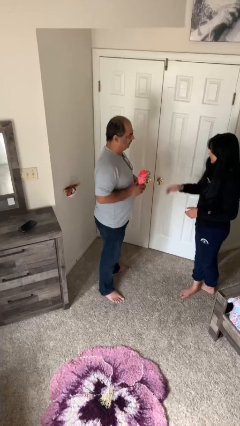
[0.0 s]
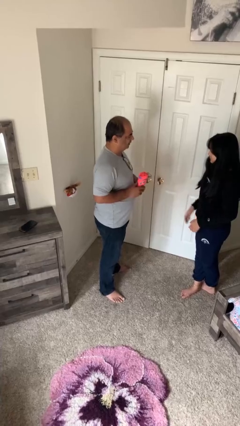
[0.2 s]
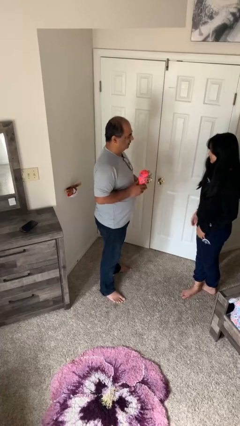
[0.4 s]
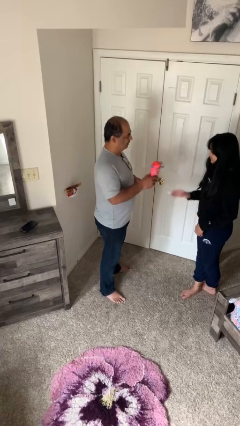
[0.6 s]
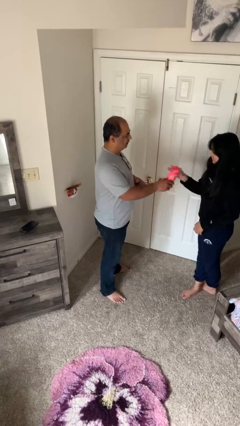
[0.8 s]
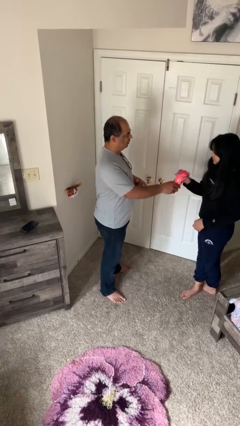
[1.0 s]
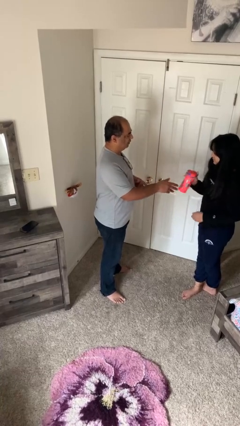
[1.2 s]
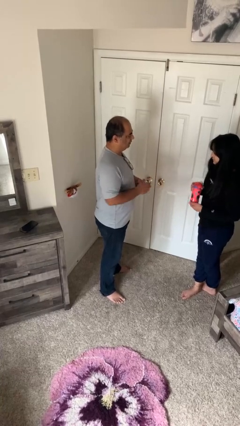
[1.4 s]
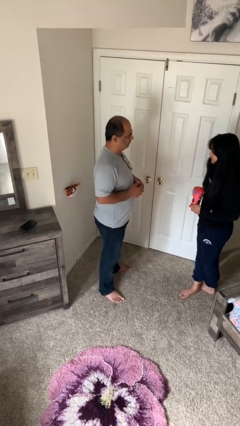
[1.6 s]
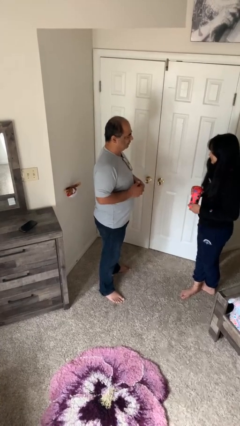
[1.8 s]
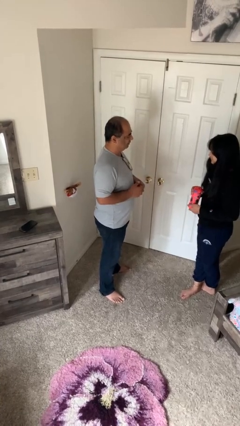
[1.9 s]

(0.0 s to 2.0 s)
person transfers object to person

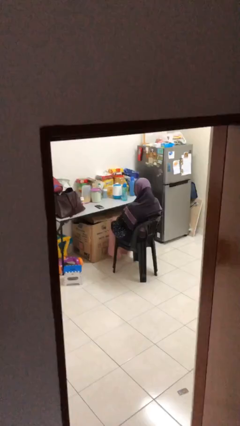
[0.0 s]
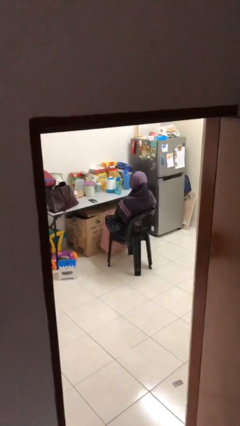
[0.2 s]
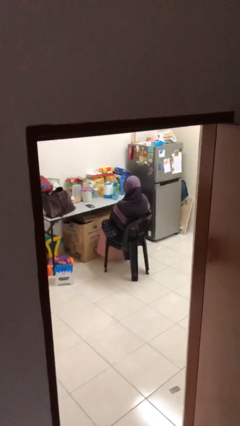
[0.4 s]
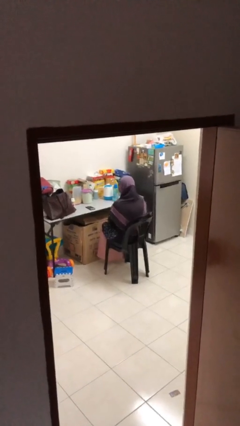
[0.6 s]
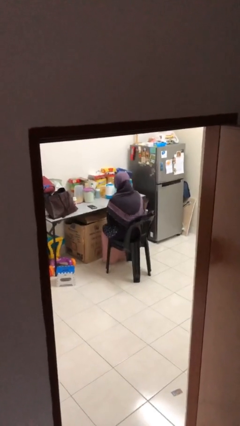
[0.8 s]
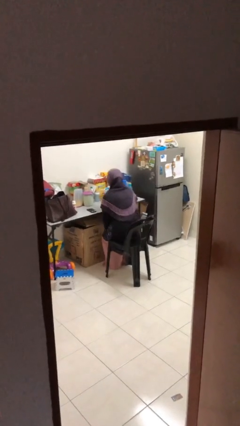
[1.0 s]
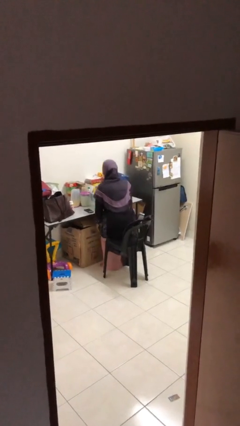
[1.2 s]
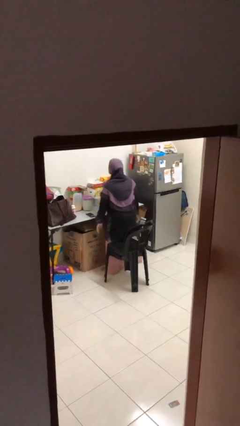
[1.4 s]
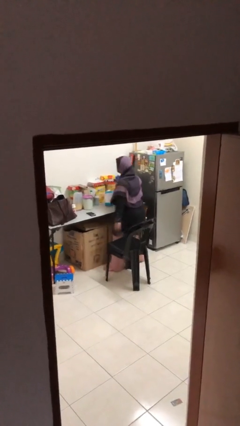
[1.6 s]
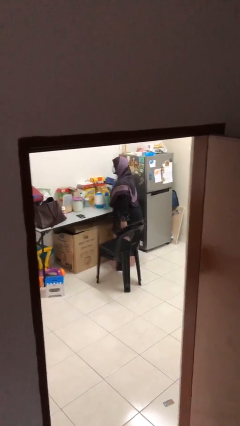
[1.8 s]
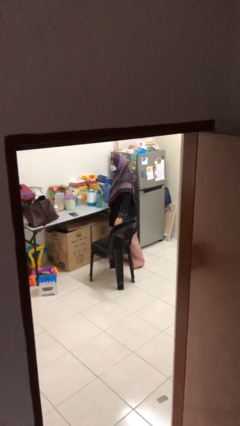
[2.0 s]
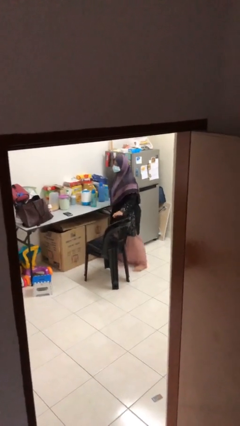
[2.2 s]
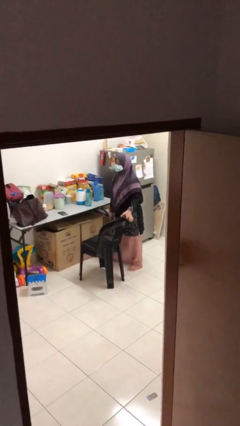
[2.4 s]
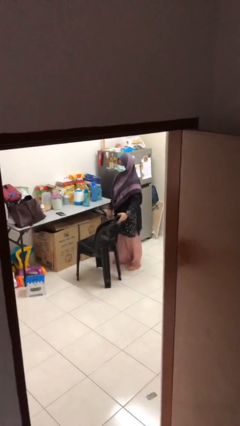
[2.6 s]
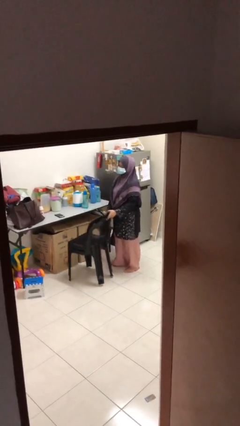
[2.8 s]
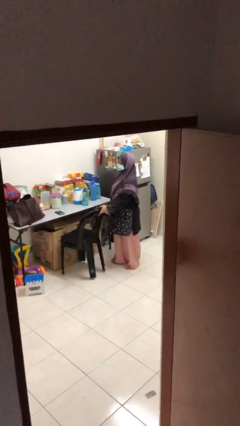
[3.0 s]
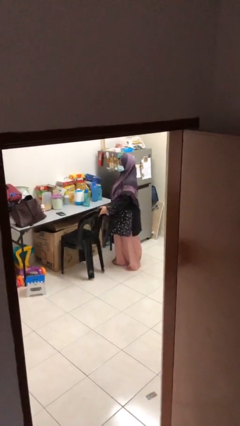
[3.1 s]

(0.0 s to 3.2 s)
person stands up

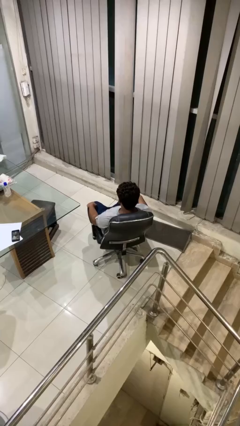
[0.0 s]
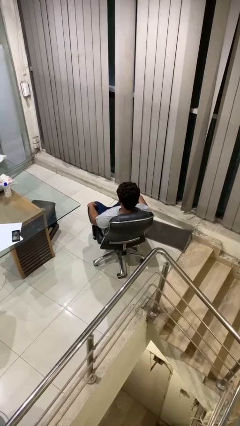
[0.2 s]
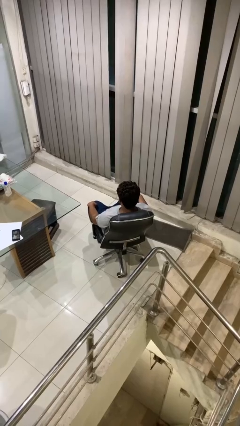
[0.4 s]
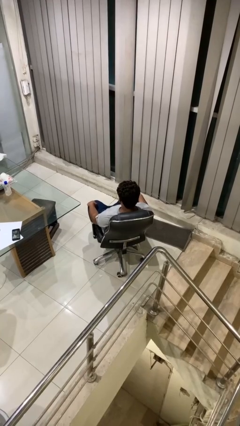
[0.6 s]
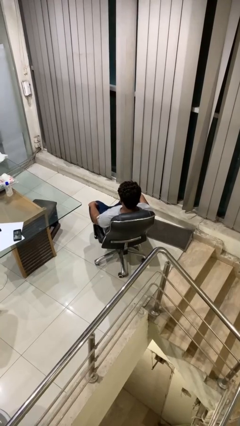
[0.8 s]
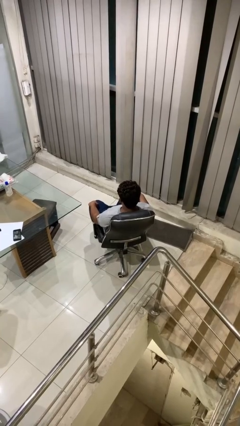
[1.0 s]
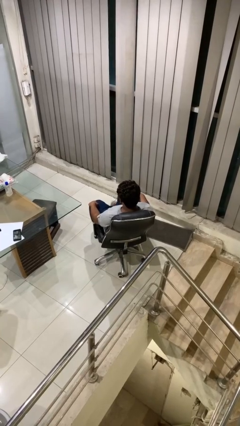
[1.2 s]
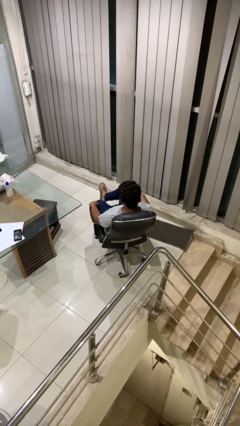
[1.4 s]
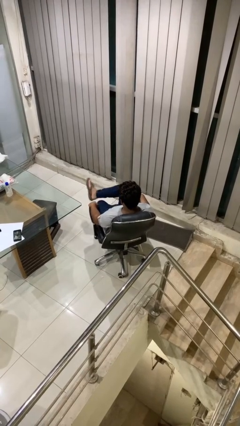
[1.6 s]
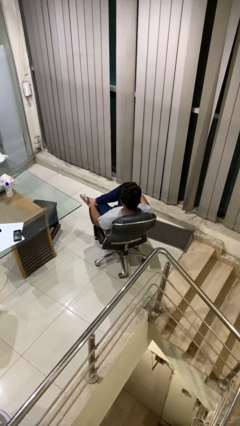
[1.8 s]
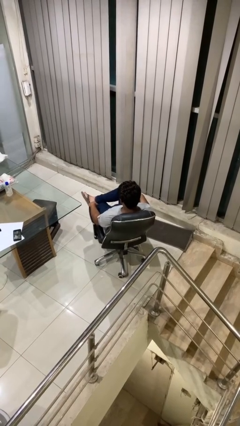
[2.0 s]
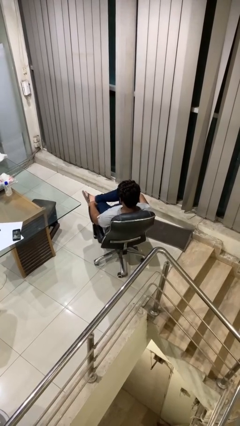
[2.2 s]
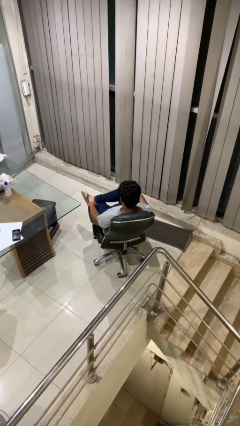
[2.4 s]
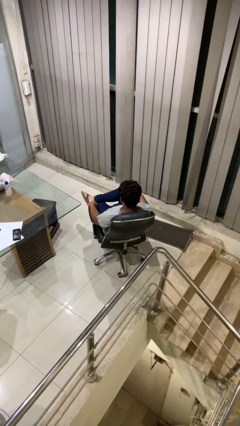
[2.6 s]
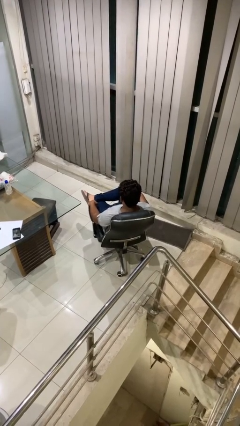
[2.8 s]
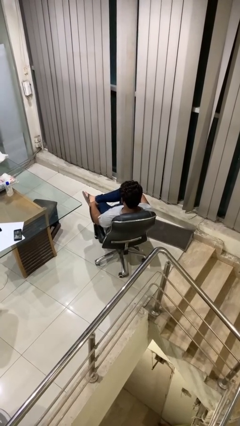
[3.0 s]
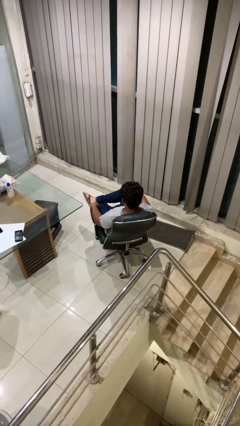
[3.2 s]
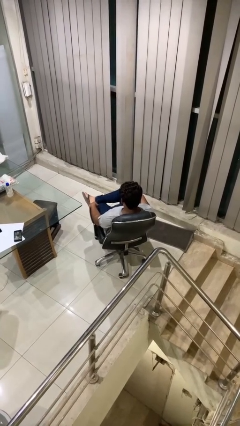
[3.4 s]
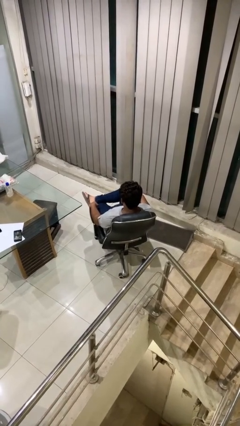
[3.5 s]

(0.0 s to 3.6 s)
person crosses legs

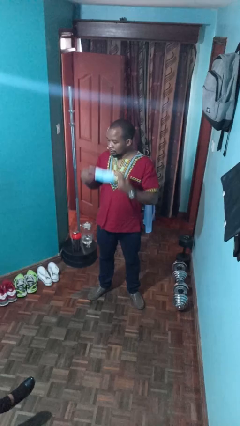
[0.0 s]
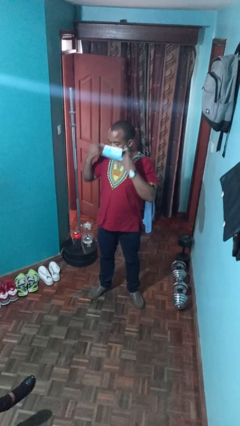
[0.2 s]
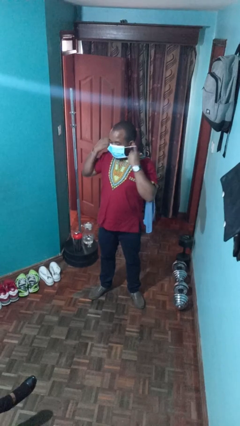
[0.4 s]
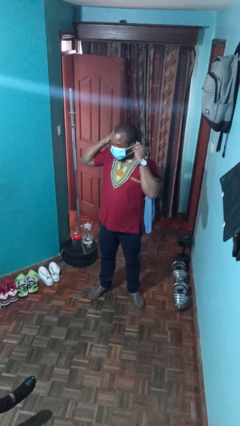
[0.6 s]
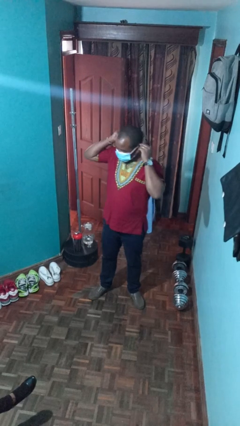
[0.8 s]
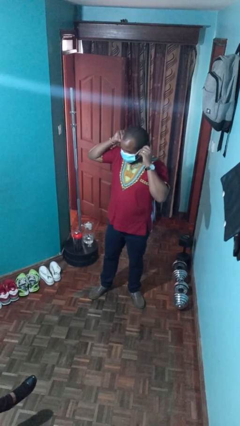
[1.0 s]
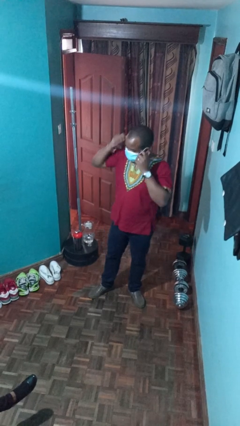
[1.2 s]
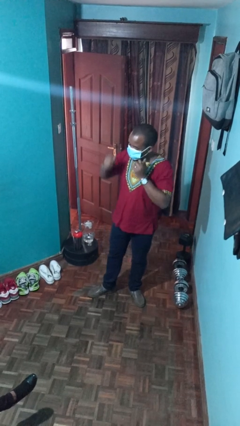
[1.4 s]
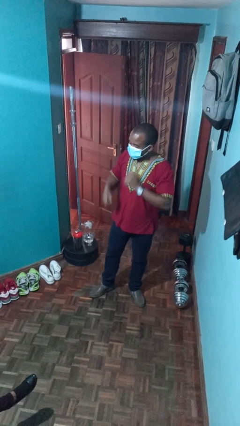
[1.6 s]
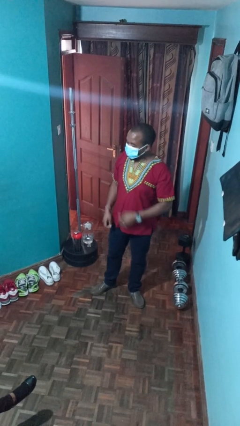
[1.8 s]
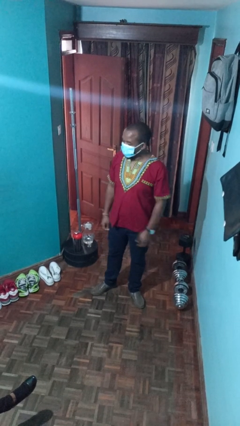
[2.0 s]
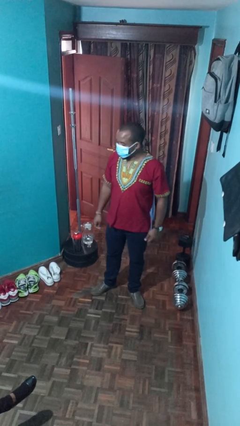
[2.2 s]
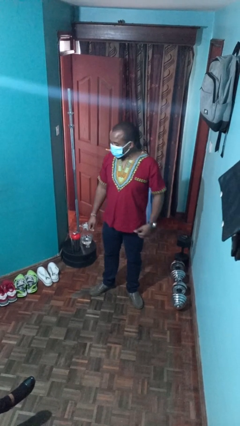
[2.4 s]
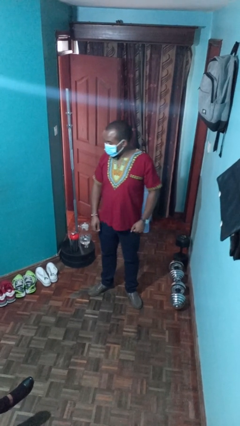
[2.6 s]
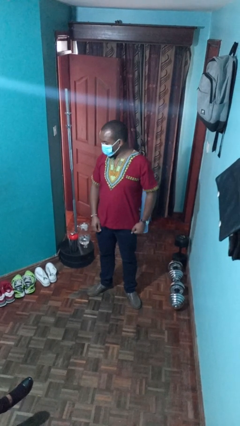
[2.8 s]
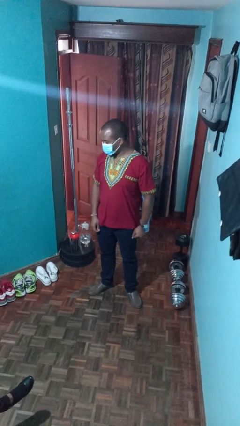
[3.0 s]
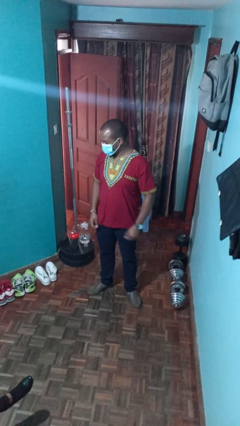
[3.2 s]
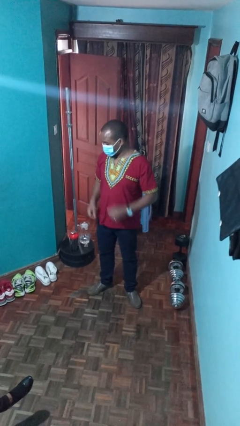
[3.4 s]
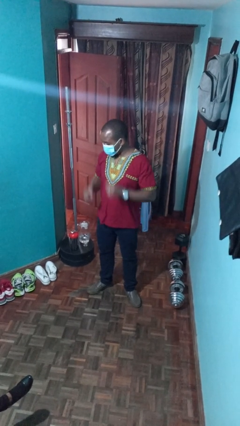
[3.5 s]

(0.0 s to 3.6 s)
person puts on facemask

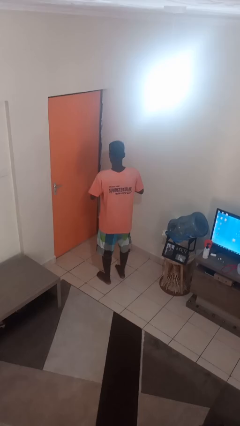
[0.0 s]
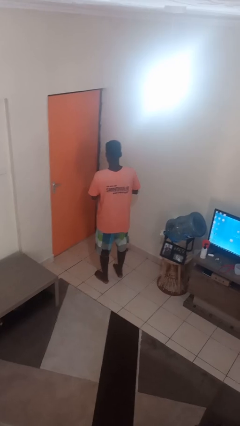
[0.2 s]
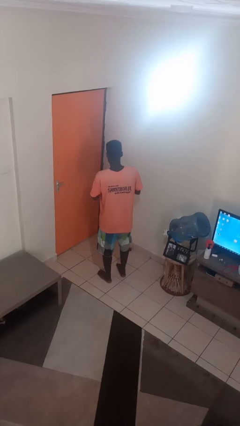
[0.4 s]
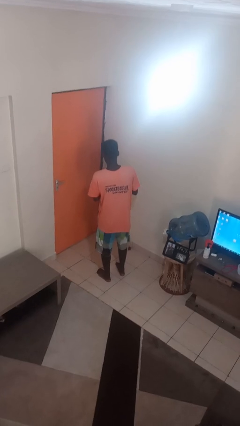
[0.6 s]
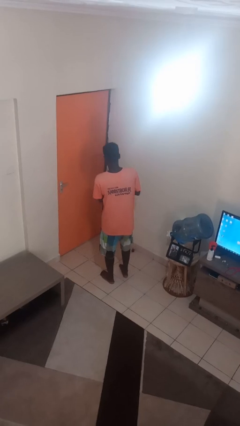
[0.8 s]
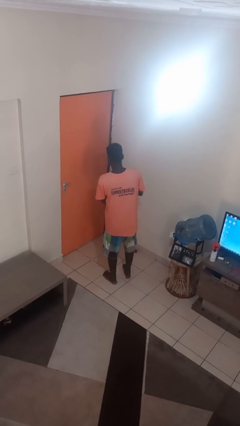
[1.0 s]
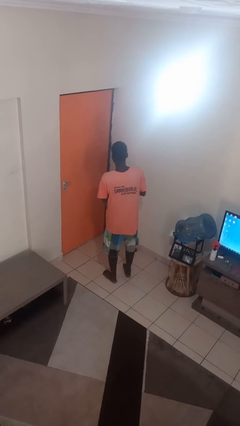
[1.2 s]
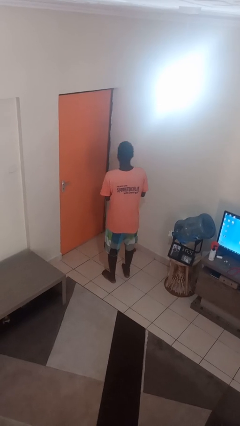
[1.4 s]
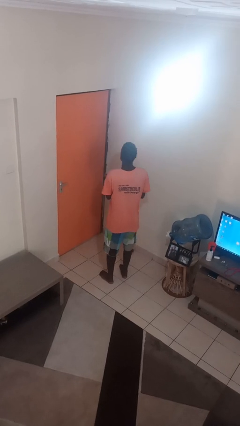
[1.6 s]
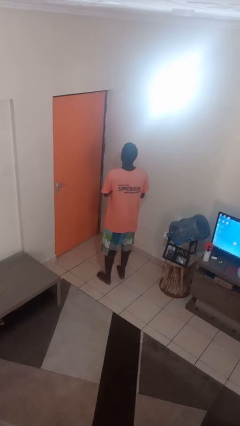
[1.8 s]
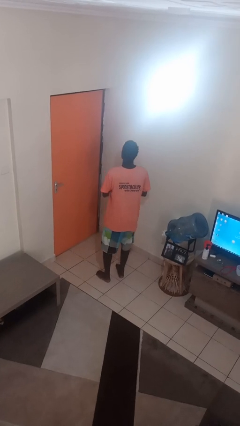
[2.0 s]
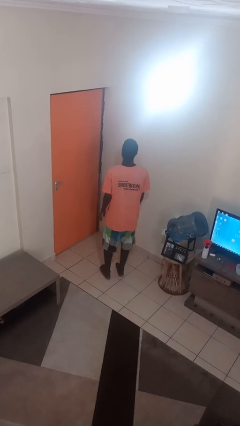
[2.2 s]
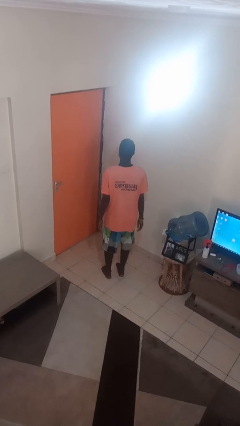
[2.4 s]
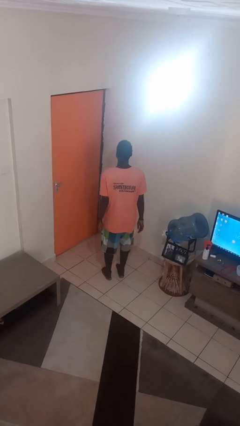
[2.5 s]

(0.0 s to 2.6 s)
person claps hands

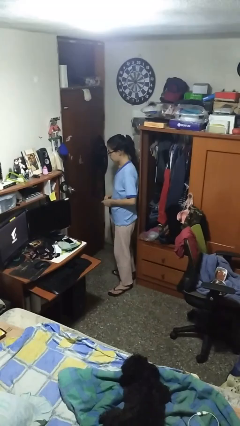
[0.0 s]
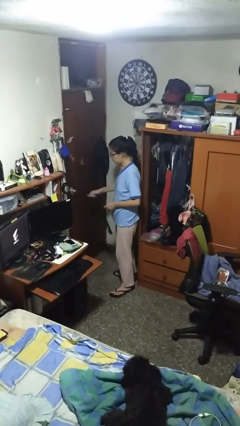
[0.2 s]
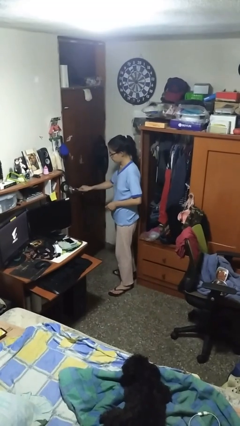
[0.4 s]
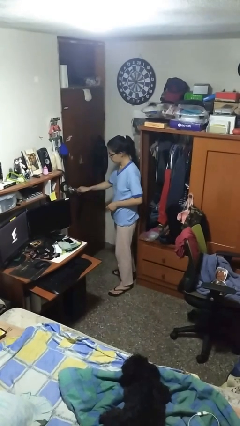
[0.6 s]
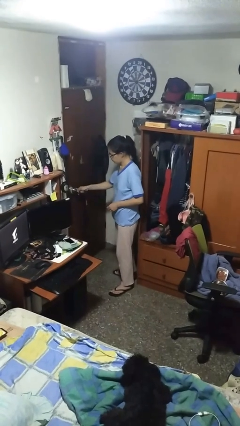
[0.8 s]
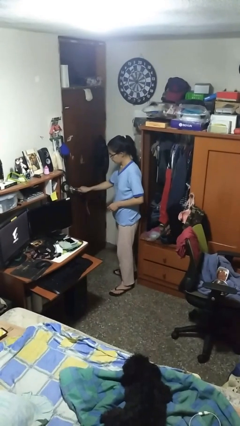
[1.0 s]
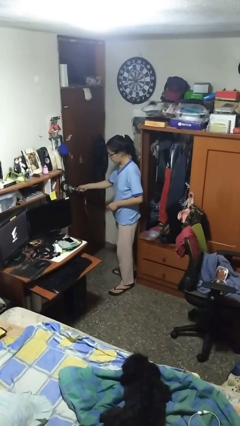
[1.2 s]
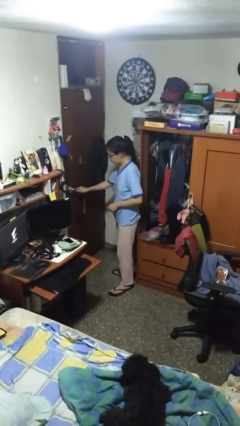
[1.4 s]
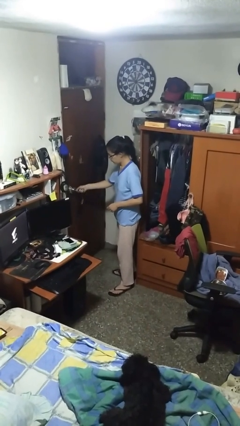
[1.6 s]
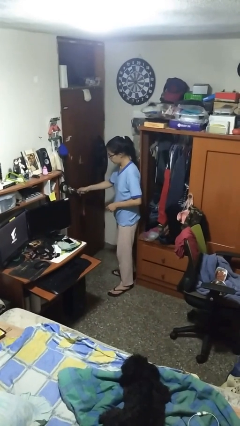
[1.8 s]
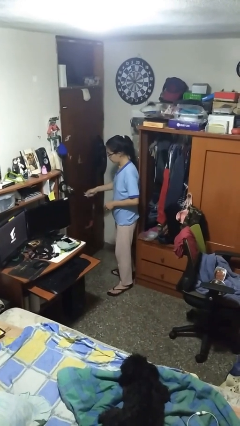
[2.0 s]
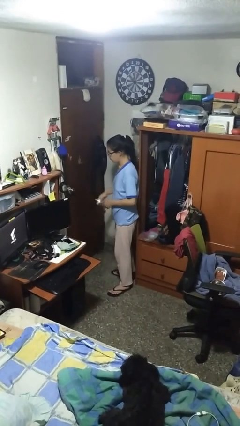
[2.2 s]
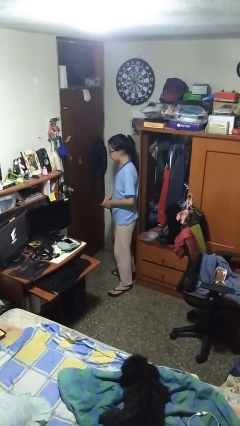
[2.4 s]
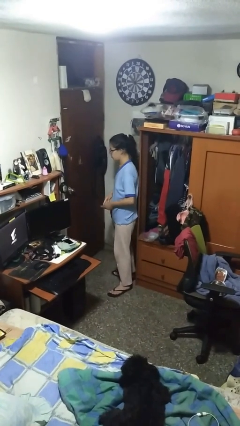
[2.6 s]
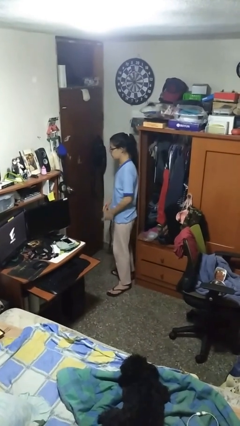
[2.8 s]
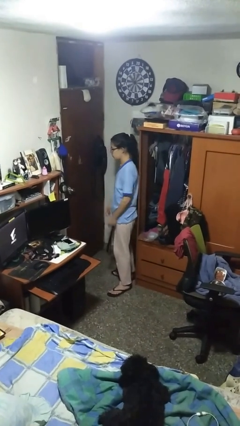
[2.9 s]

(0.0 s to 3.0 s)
person locks door with keys
